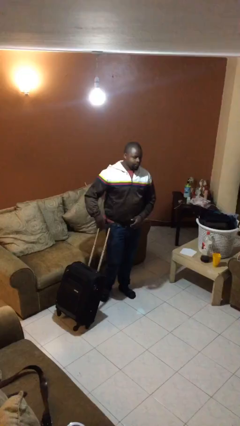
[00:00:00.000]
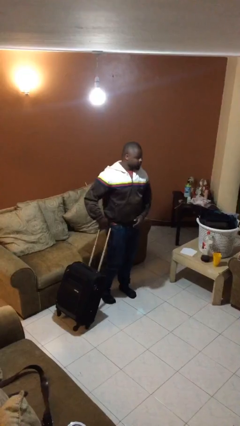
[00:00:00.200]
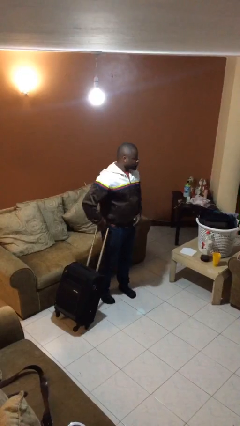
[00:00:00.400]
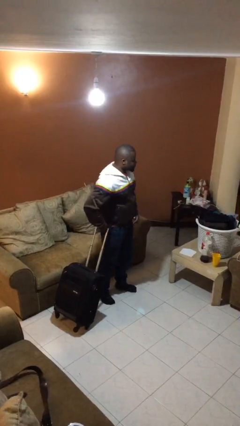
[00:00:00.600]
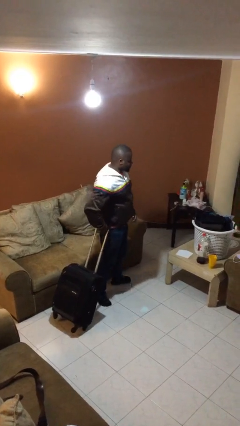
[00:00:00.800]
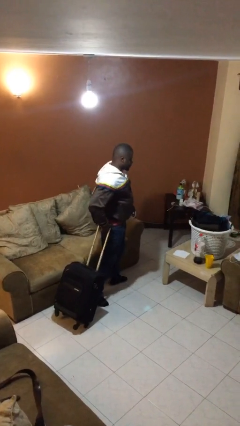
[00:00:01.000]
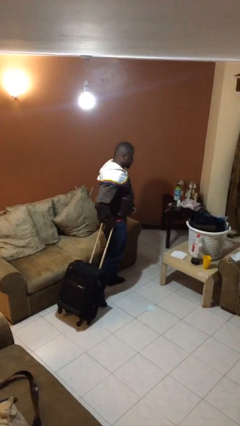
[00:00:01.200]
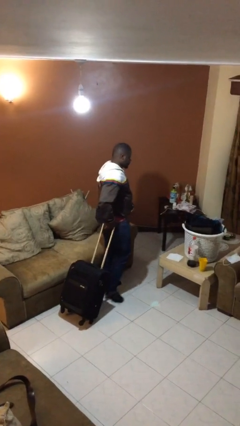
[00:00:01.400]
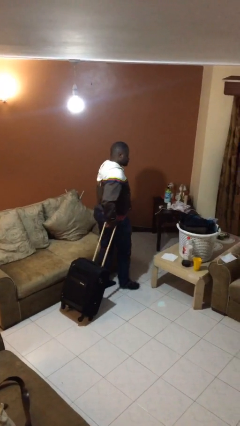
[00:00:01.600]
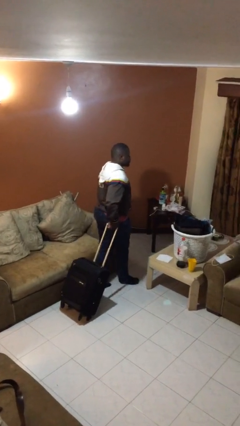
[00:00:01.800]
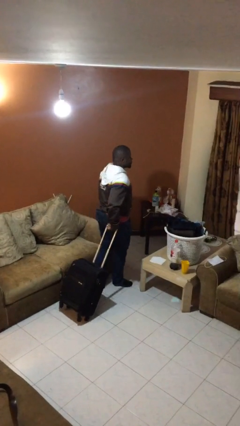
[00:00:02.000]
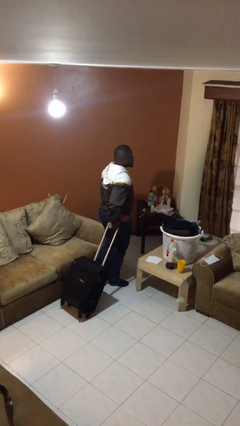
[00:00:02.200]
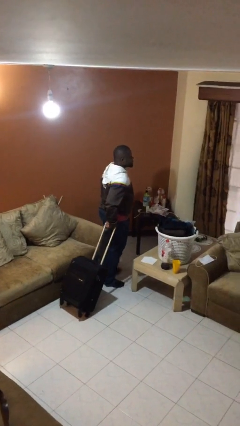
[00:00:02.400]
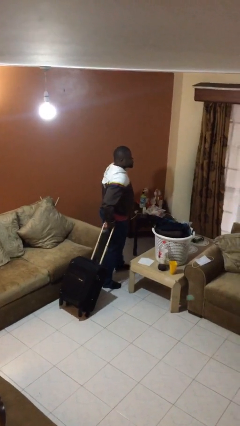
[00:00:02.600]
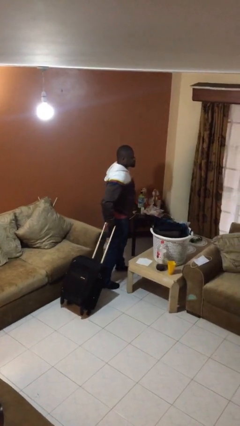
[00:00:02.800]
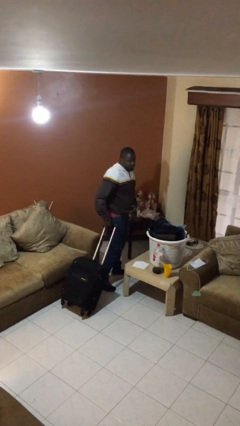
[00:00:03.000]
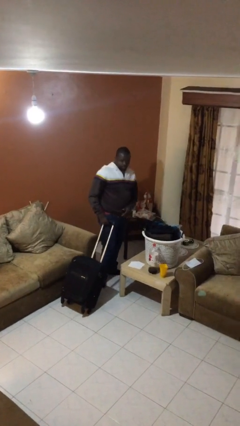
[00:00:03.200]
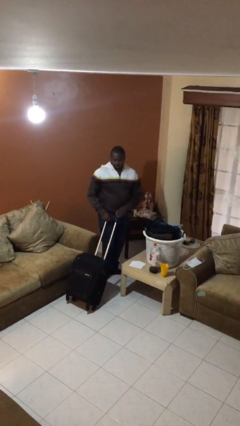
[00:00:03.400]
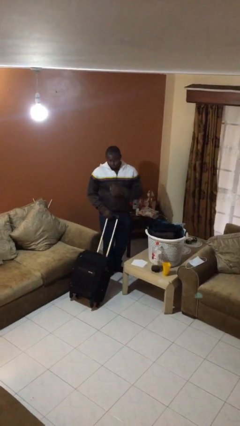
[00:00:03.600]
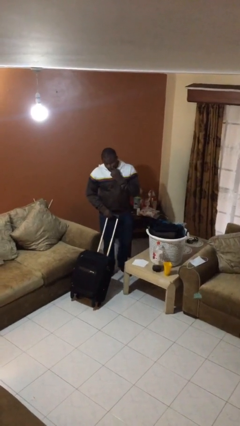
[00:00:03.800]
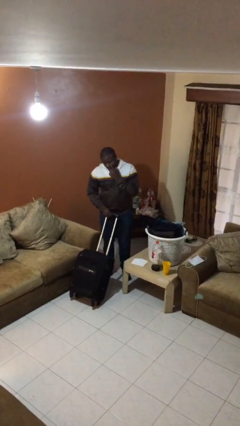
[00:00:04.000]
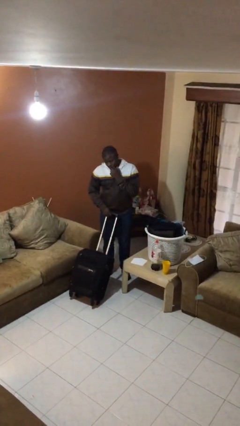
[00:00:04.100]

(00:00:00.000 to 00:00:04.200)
person pulls wheeled cart

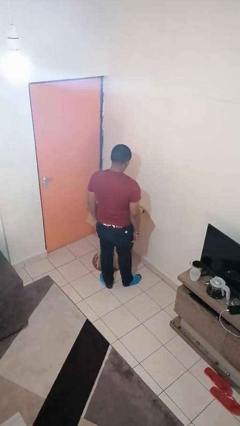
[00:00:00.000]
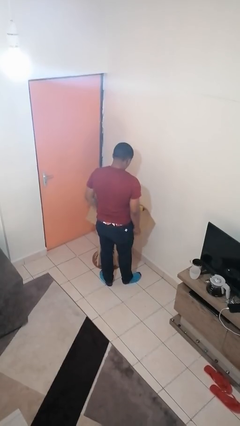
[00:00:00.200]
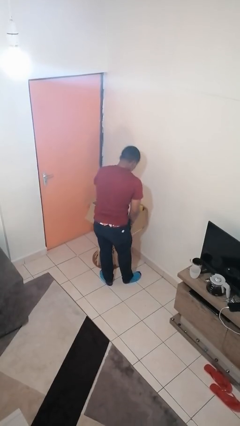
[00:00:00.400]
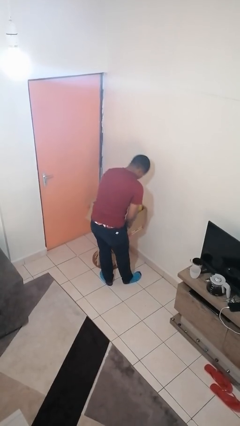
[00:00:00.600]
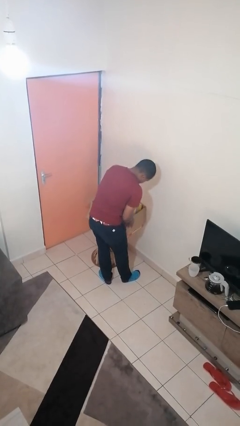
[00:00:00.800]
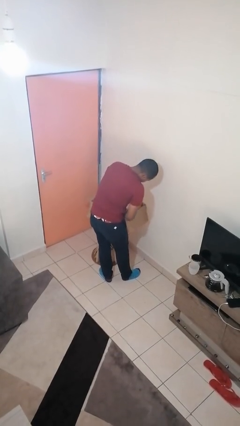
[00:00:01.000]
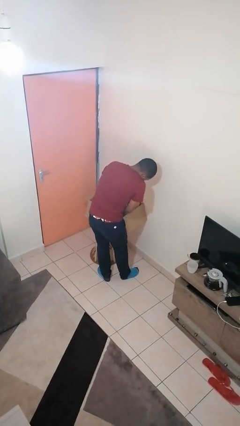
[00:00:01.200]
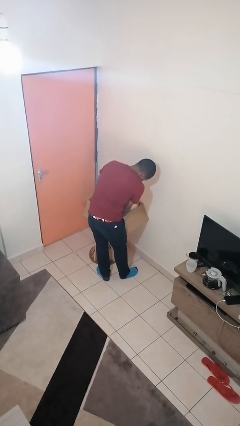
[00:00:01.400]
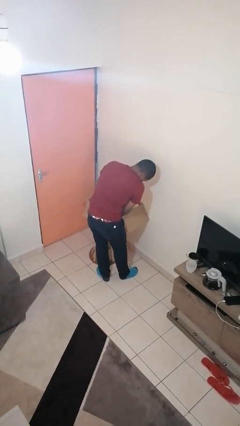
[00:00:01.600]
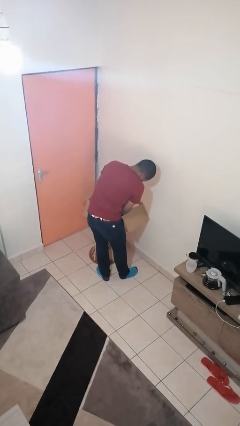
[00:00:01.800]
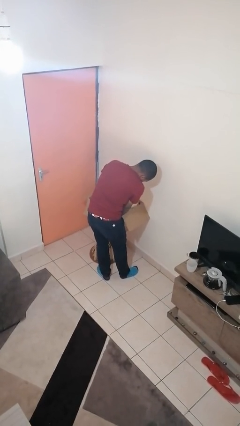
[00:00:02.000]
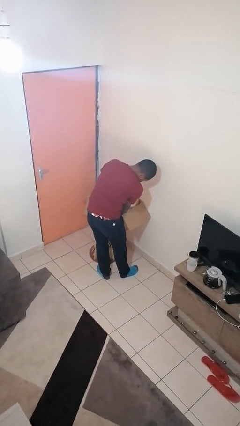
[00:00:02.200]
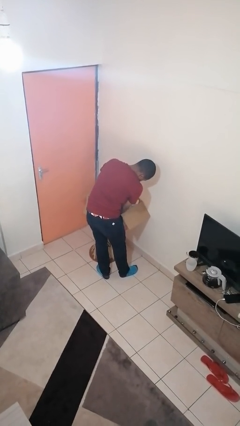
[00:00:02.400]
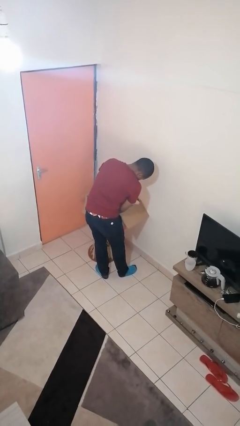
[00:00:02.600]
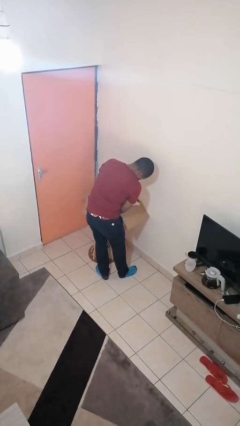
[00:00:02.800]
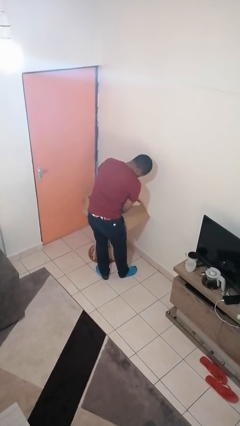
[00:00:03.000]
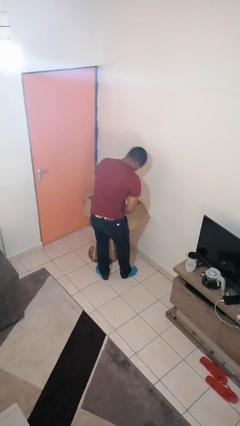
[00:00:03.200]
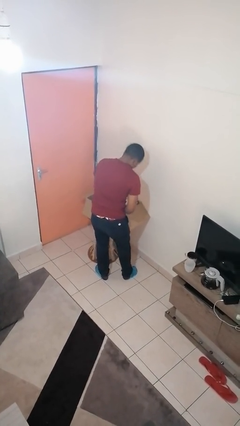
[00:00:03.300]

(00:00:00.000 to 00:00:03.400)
person searches in box

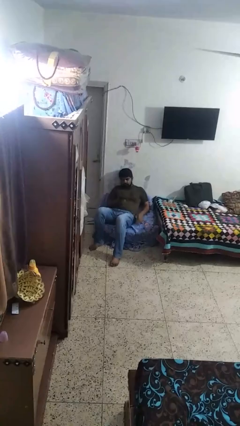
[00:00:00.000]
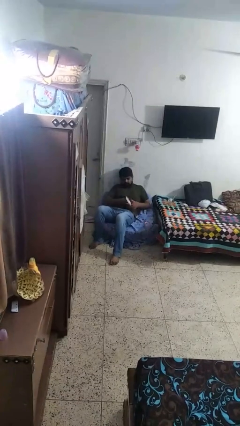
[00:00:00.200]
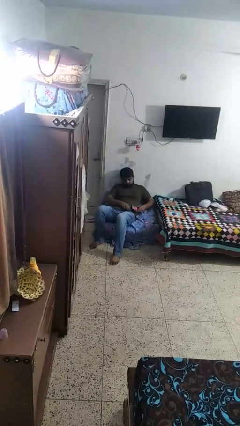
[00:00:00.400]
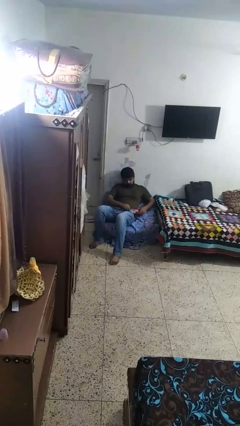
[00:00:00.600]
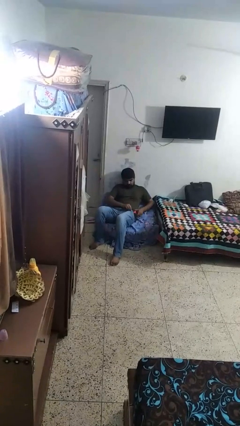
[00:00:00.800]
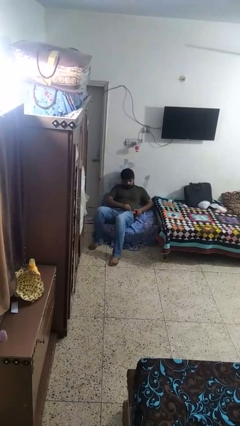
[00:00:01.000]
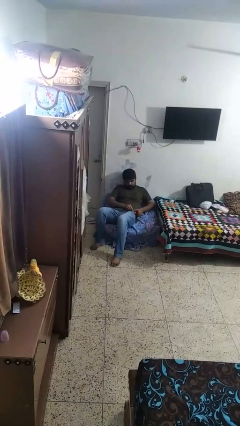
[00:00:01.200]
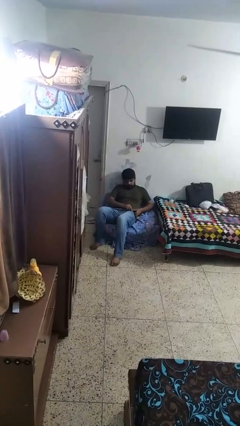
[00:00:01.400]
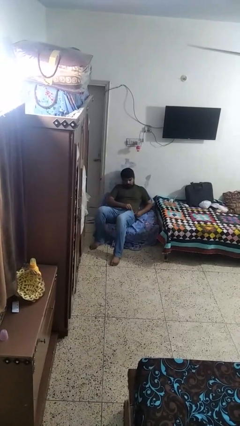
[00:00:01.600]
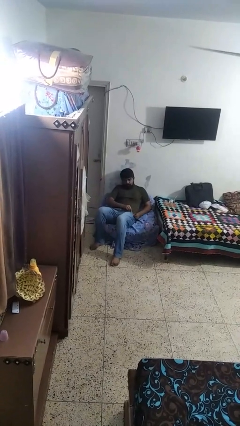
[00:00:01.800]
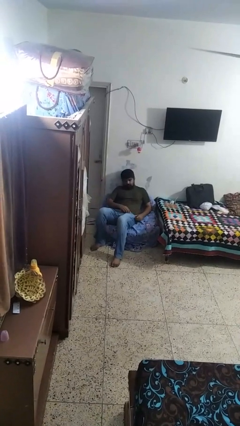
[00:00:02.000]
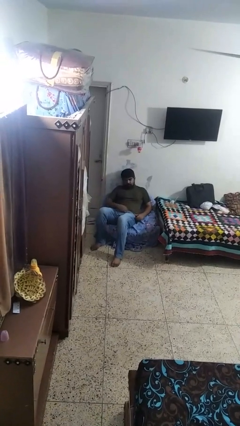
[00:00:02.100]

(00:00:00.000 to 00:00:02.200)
person puts phone into pocket

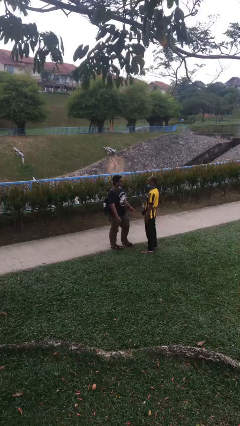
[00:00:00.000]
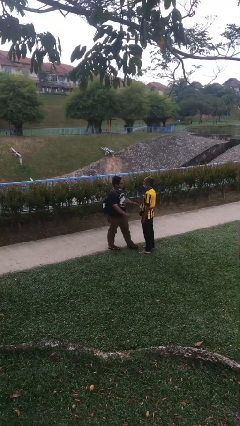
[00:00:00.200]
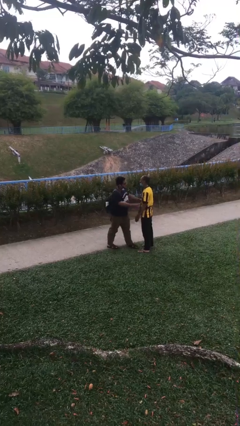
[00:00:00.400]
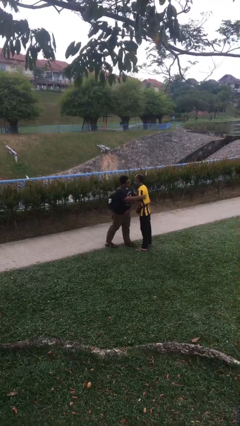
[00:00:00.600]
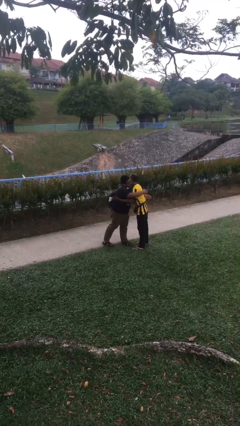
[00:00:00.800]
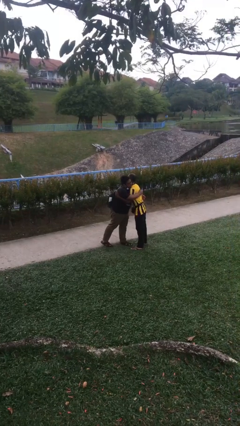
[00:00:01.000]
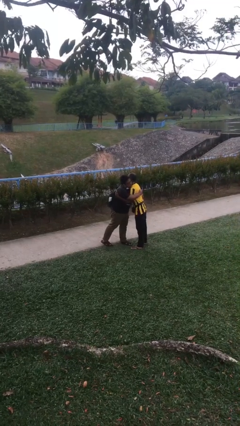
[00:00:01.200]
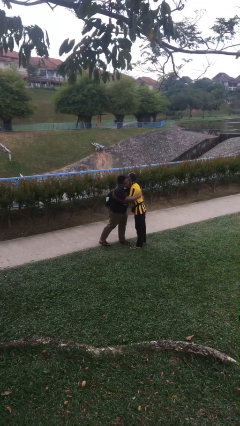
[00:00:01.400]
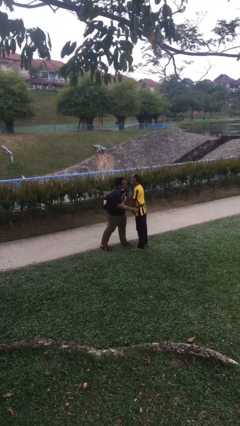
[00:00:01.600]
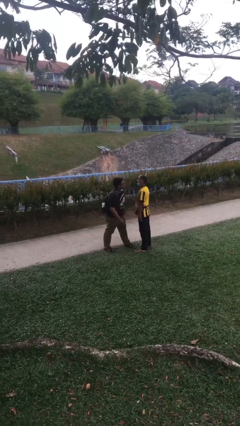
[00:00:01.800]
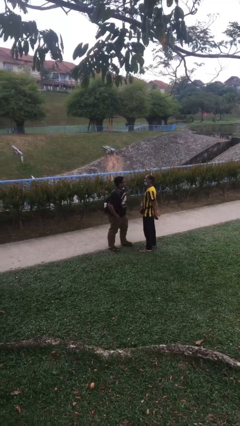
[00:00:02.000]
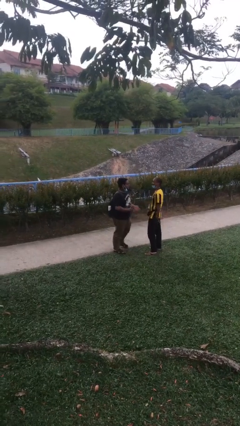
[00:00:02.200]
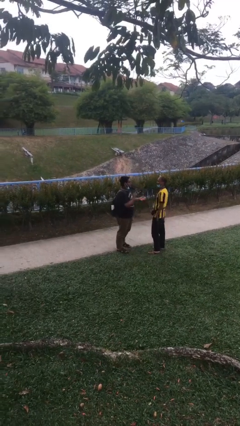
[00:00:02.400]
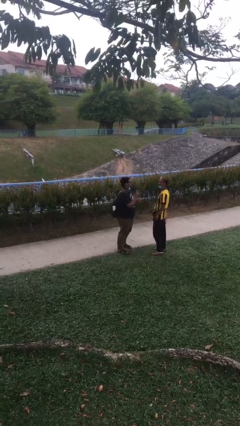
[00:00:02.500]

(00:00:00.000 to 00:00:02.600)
person embraces person

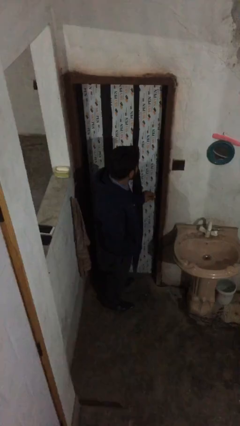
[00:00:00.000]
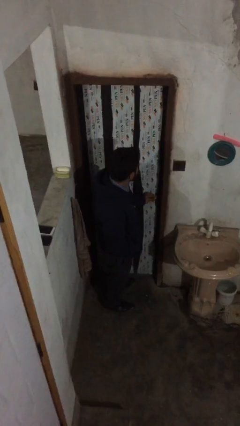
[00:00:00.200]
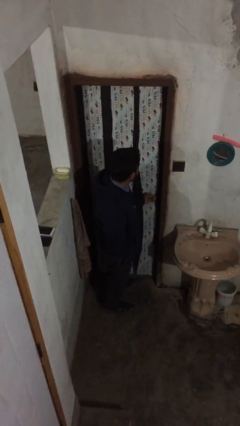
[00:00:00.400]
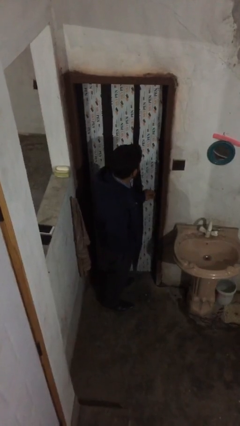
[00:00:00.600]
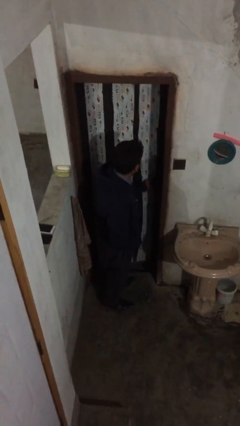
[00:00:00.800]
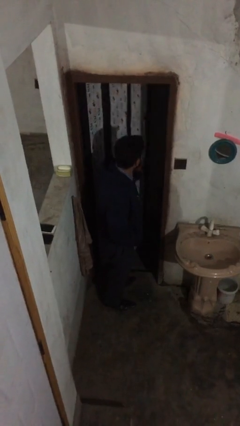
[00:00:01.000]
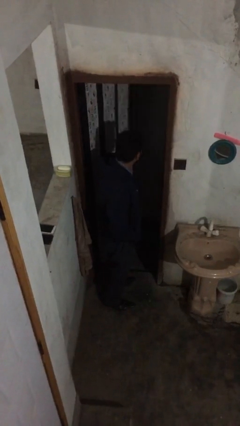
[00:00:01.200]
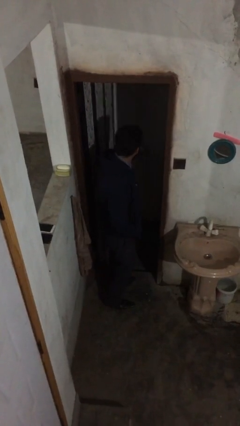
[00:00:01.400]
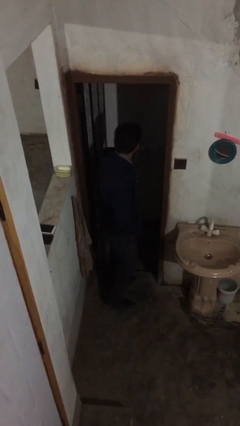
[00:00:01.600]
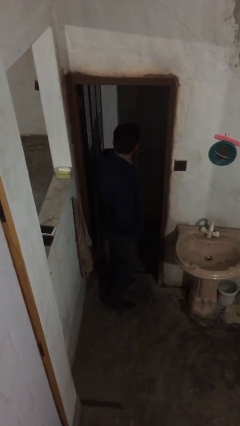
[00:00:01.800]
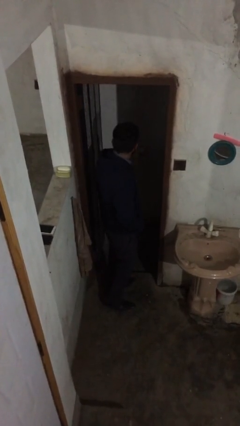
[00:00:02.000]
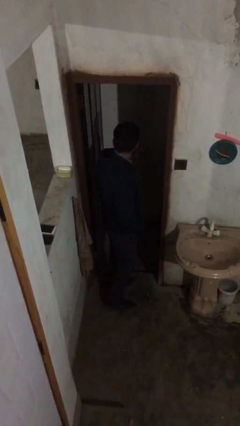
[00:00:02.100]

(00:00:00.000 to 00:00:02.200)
person opens facility door

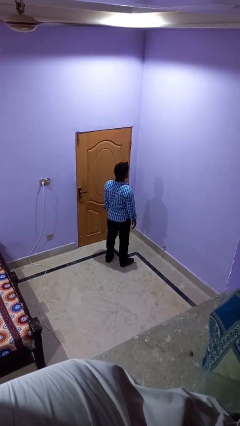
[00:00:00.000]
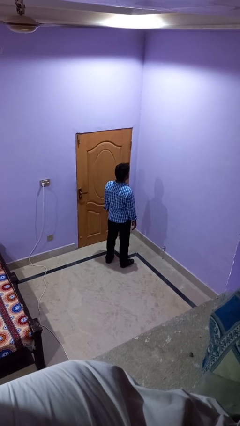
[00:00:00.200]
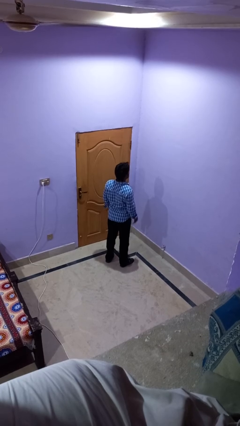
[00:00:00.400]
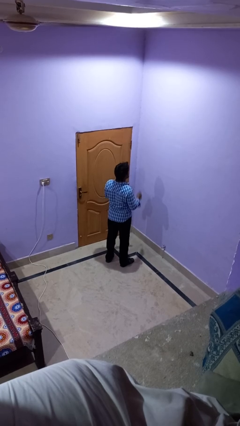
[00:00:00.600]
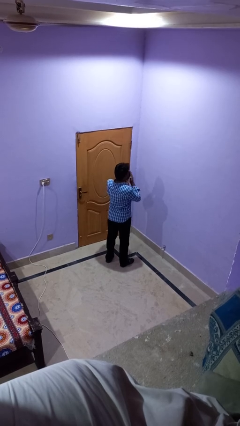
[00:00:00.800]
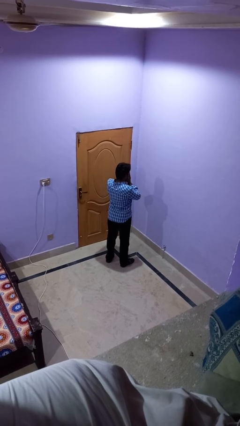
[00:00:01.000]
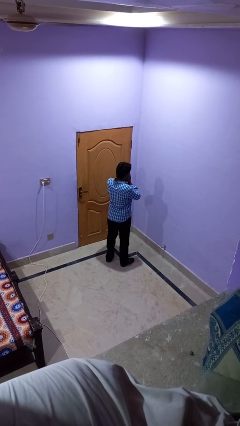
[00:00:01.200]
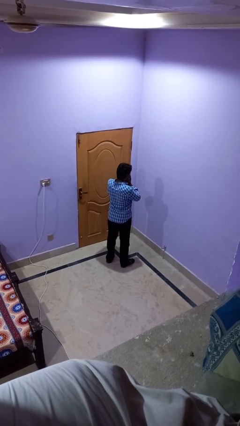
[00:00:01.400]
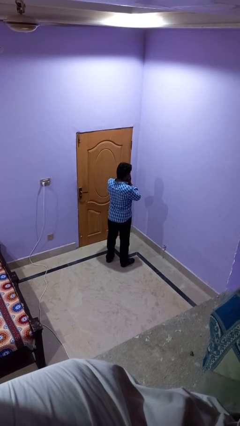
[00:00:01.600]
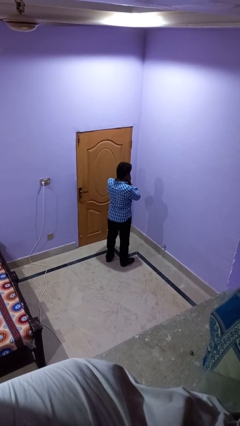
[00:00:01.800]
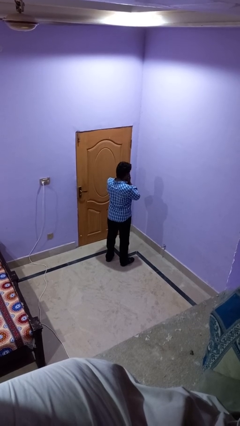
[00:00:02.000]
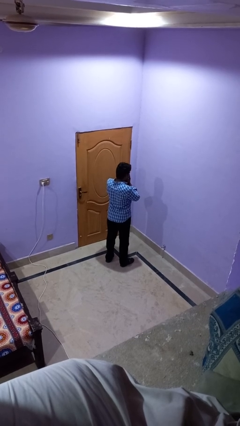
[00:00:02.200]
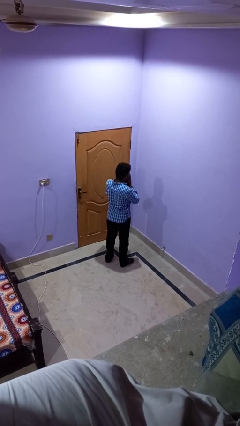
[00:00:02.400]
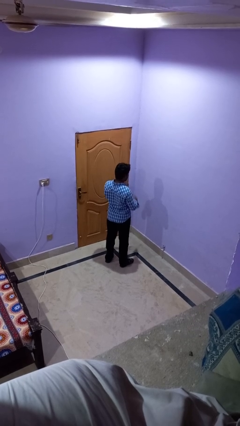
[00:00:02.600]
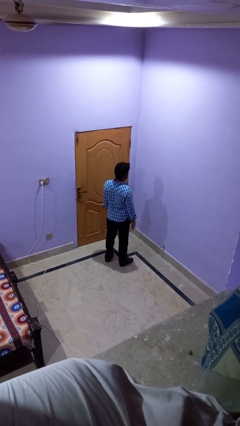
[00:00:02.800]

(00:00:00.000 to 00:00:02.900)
person sneezes into hand
